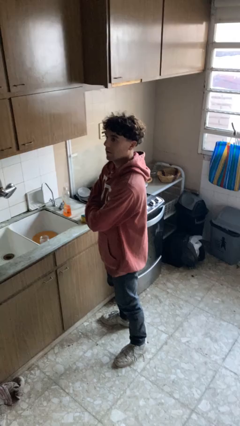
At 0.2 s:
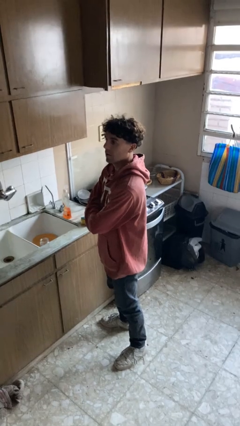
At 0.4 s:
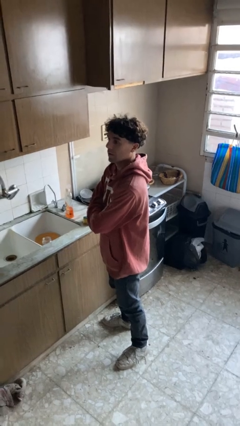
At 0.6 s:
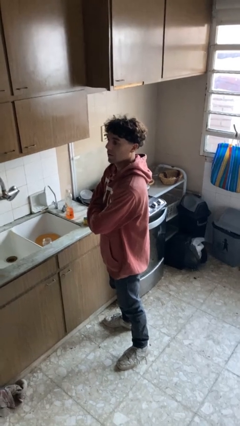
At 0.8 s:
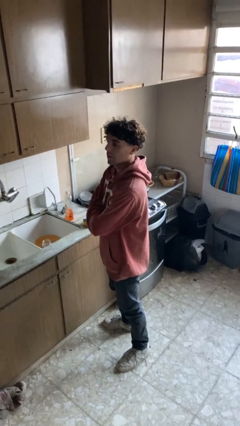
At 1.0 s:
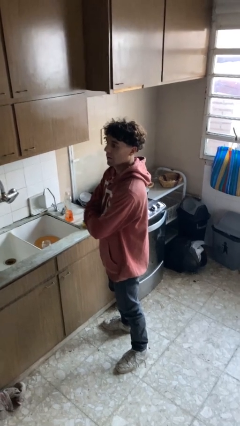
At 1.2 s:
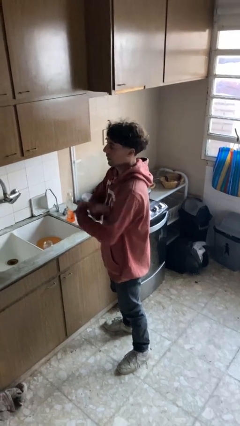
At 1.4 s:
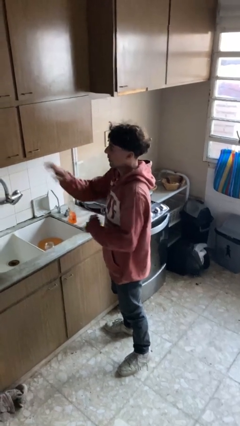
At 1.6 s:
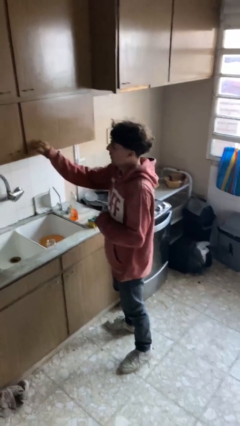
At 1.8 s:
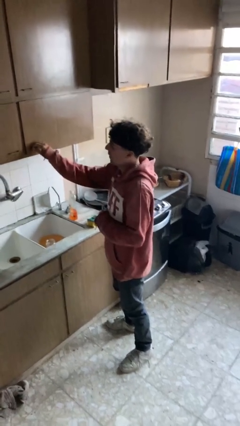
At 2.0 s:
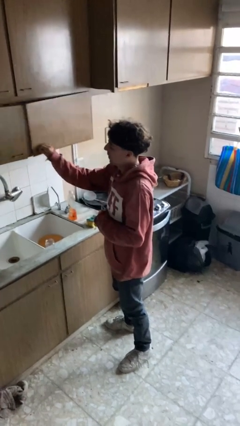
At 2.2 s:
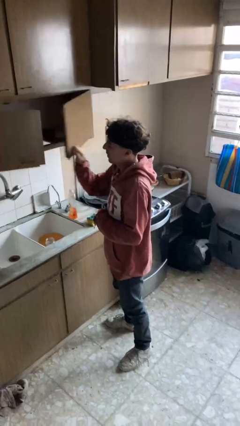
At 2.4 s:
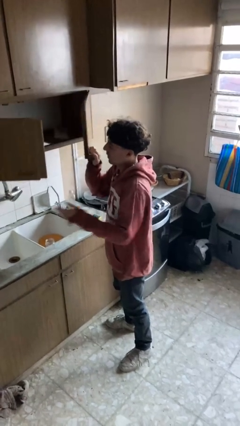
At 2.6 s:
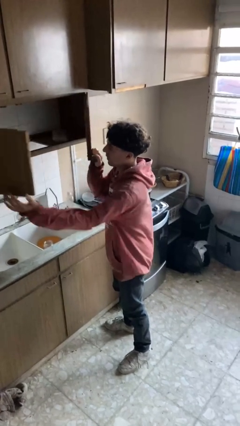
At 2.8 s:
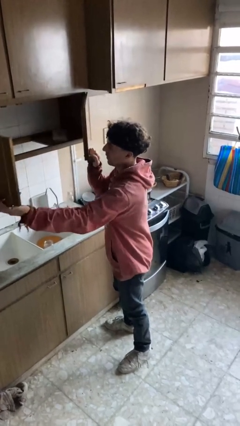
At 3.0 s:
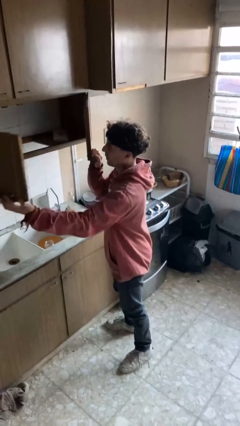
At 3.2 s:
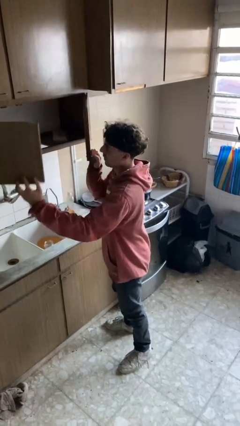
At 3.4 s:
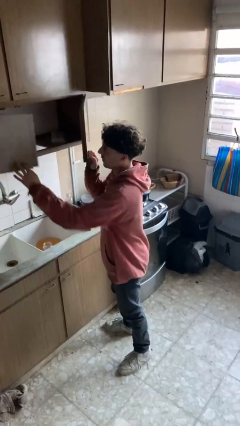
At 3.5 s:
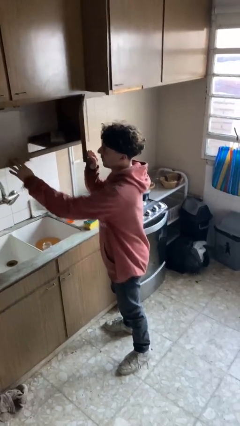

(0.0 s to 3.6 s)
person opens cabinet

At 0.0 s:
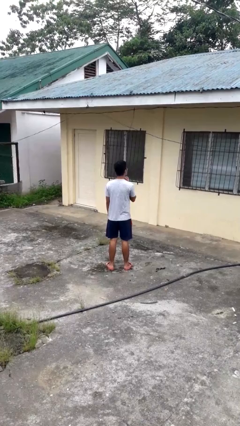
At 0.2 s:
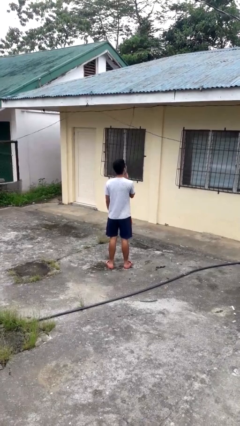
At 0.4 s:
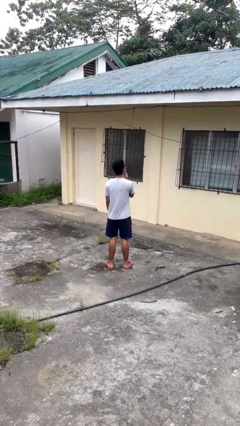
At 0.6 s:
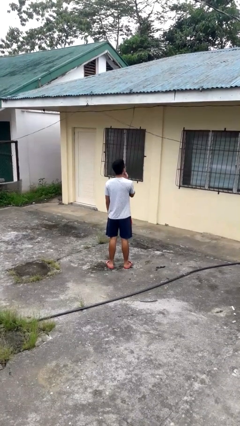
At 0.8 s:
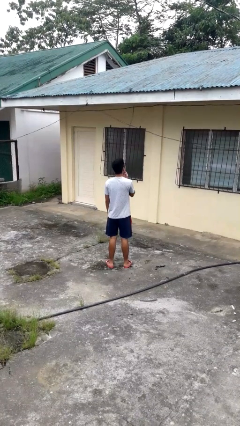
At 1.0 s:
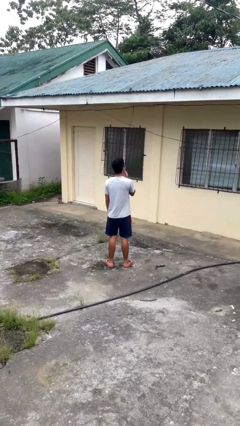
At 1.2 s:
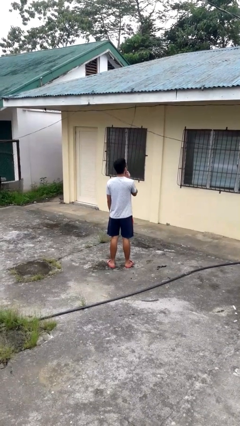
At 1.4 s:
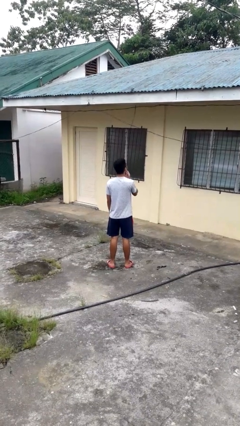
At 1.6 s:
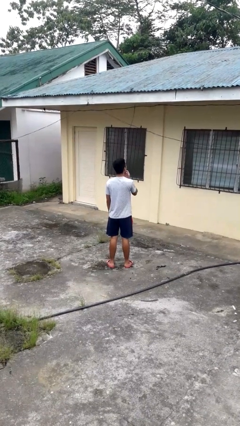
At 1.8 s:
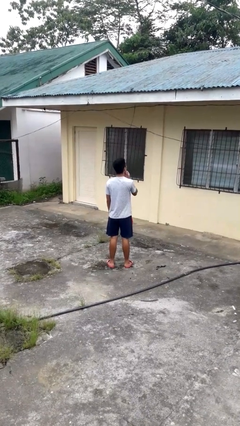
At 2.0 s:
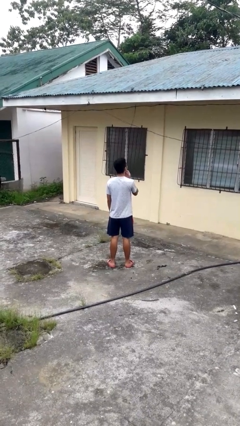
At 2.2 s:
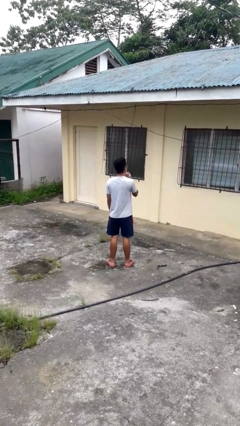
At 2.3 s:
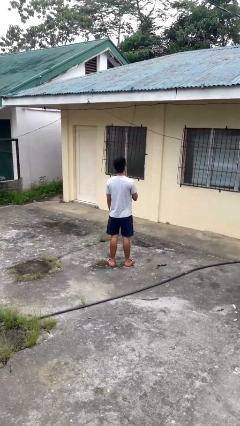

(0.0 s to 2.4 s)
person scratches face

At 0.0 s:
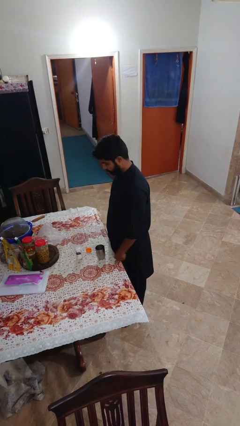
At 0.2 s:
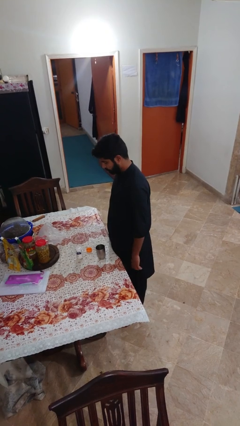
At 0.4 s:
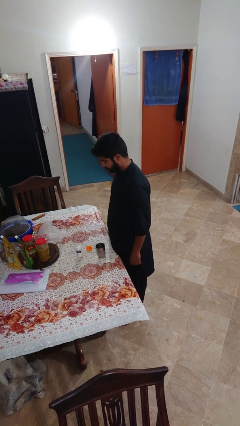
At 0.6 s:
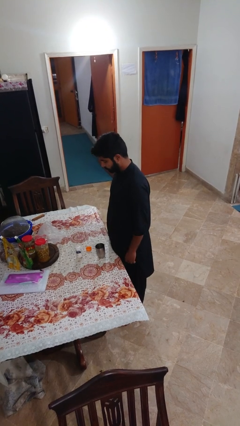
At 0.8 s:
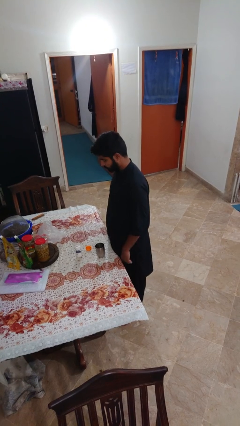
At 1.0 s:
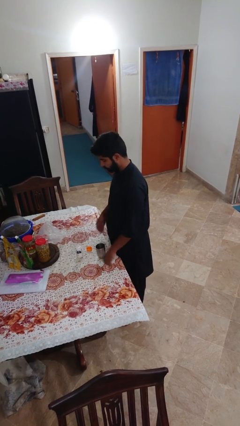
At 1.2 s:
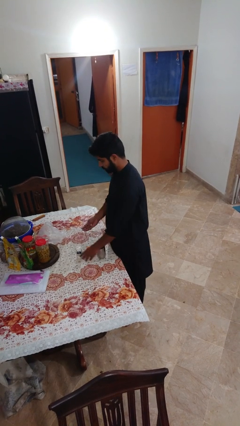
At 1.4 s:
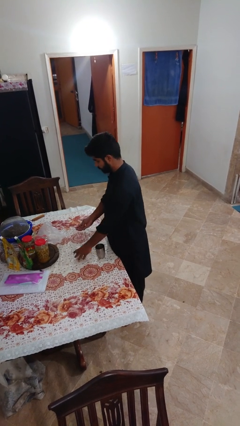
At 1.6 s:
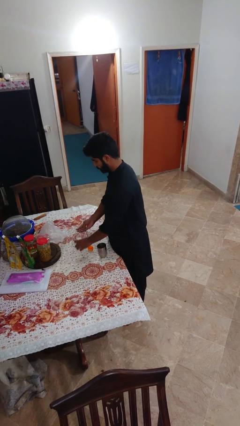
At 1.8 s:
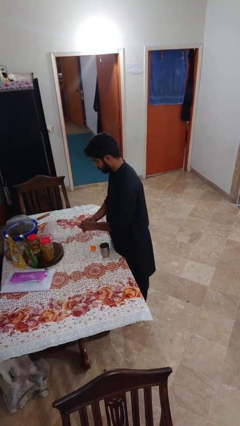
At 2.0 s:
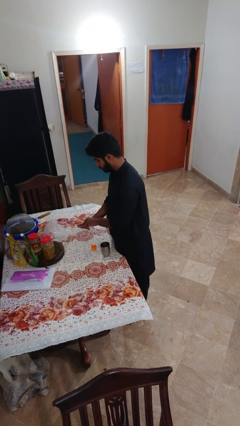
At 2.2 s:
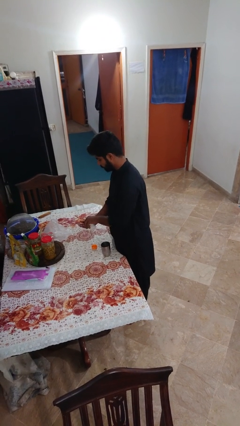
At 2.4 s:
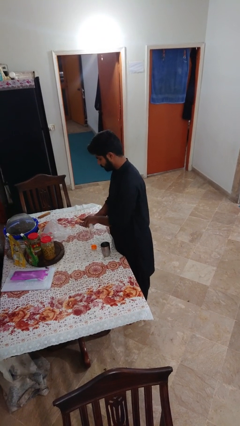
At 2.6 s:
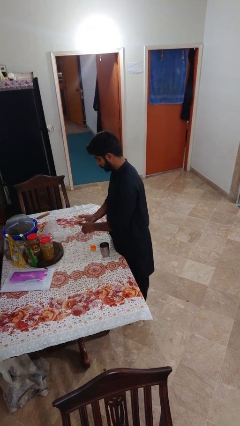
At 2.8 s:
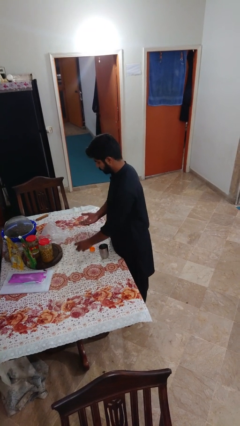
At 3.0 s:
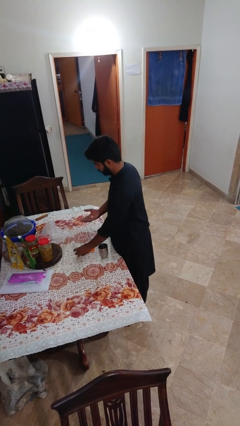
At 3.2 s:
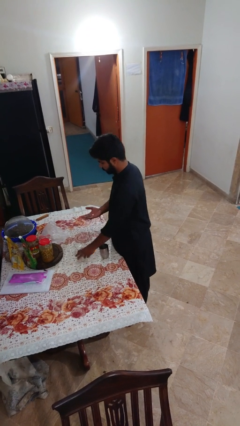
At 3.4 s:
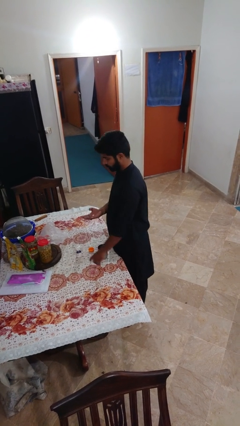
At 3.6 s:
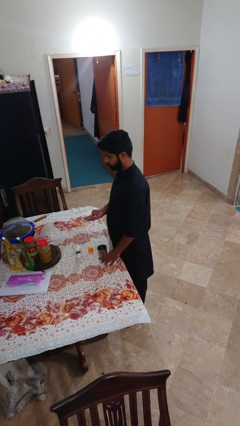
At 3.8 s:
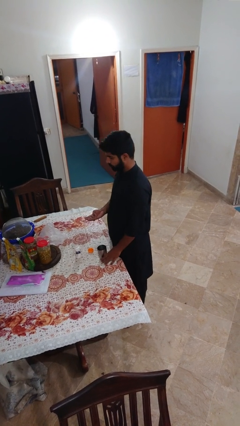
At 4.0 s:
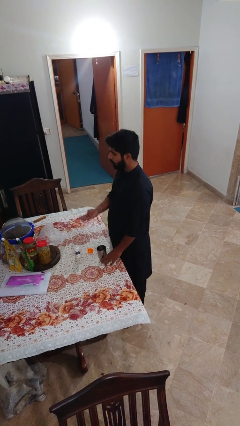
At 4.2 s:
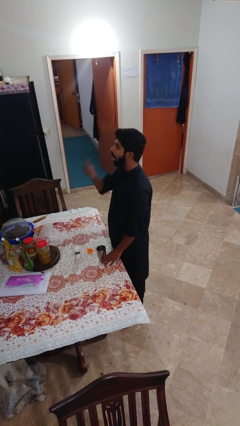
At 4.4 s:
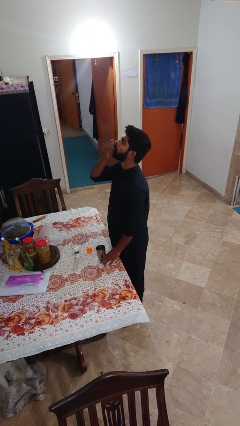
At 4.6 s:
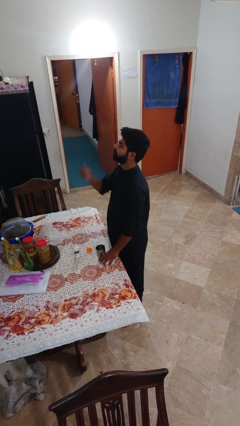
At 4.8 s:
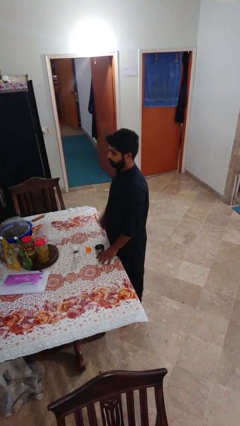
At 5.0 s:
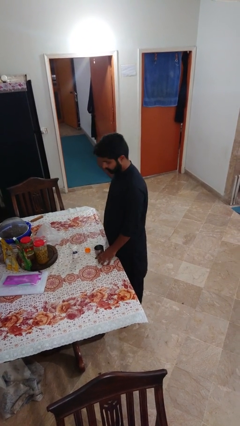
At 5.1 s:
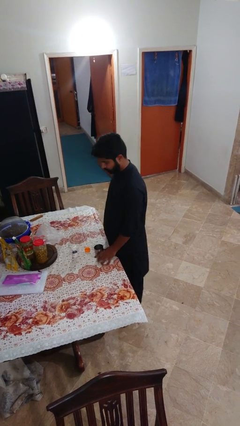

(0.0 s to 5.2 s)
person takes medicine pills

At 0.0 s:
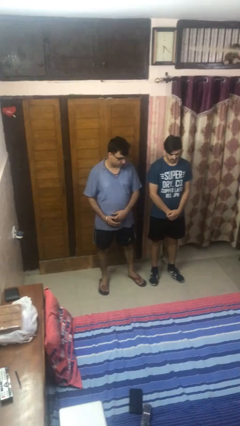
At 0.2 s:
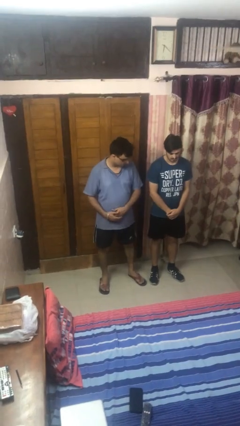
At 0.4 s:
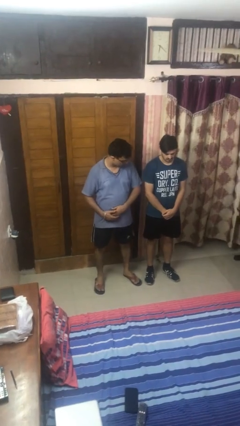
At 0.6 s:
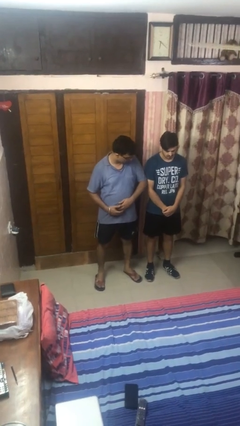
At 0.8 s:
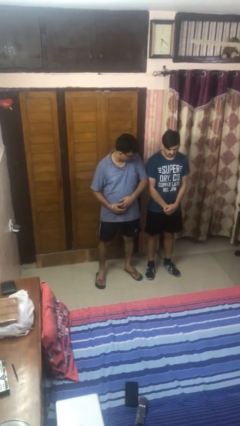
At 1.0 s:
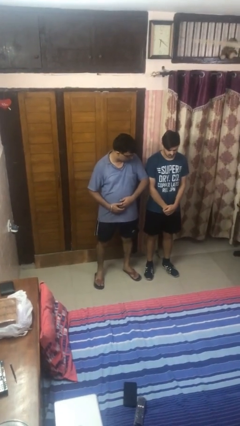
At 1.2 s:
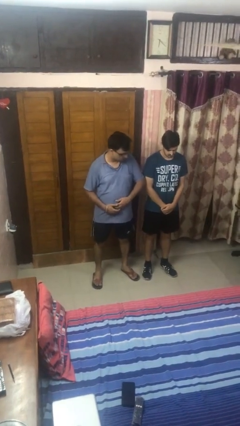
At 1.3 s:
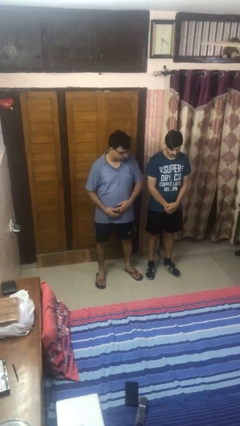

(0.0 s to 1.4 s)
person nudges person with elbow

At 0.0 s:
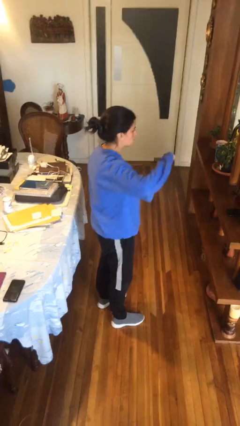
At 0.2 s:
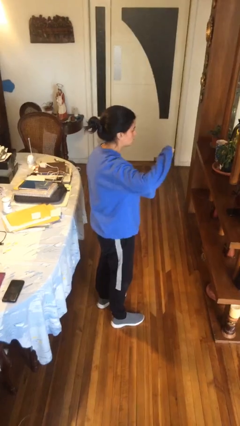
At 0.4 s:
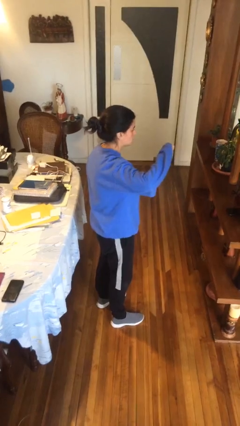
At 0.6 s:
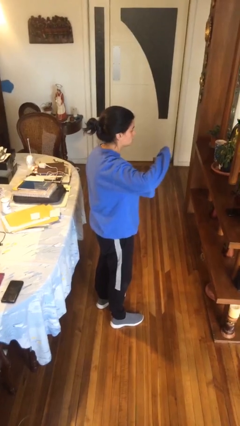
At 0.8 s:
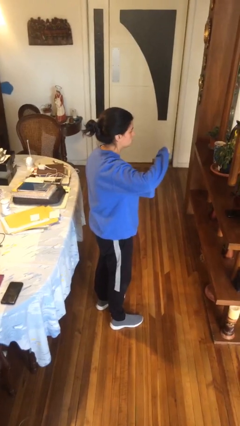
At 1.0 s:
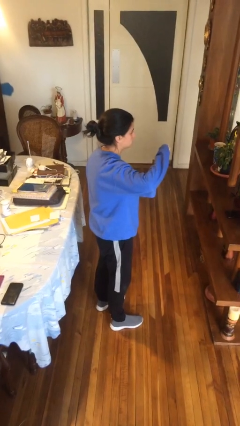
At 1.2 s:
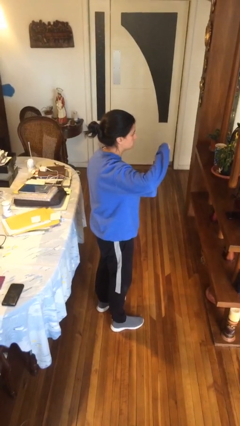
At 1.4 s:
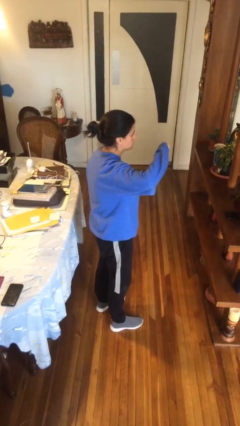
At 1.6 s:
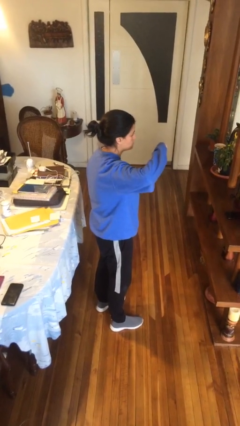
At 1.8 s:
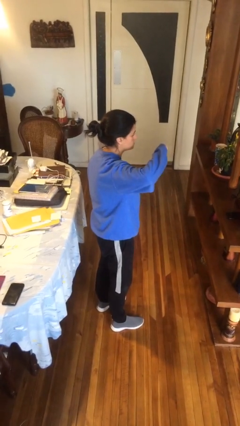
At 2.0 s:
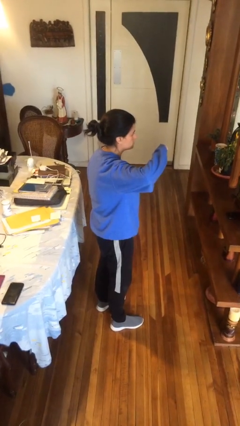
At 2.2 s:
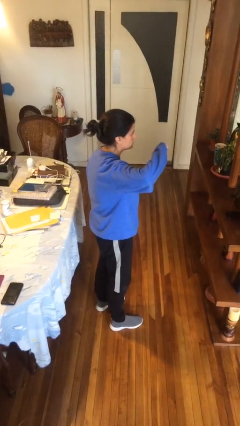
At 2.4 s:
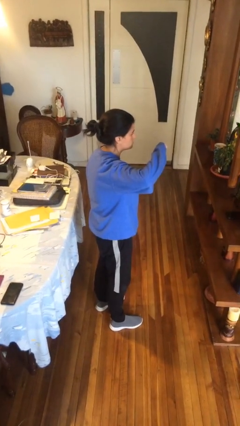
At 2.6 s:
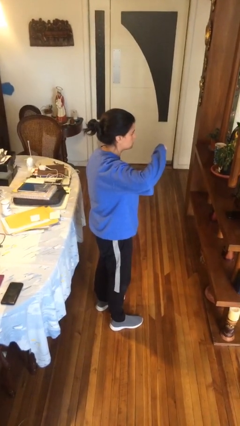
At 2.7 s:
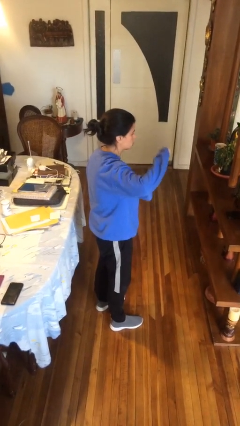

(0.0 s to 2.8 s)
person gestures thumbs down

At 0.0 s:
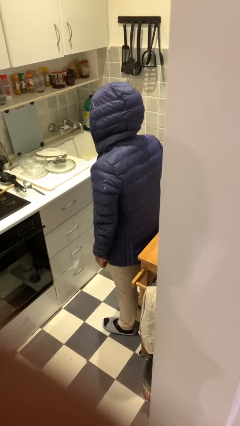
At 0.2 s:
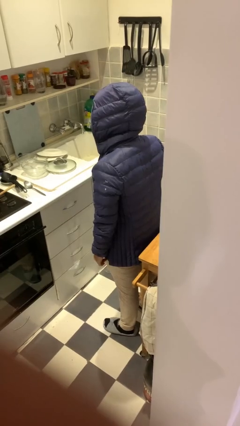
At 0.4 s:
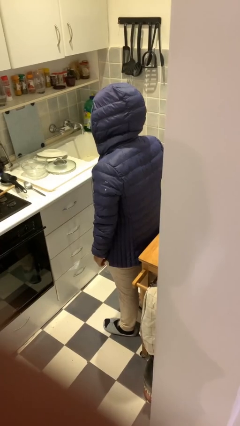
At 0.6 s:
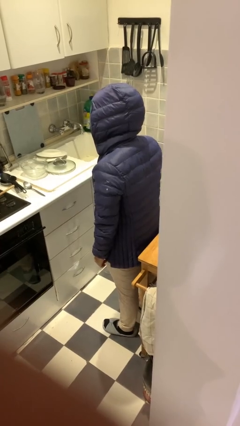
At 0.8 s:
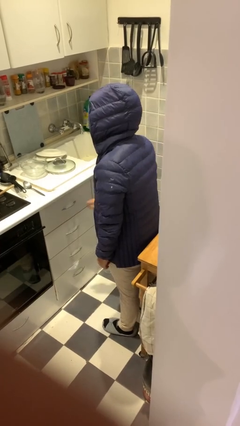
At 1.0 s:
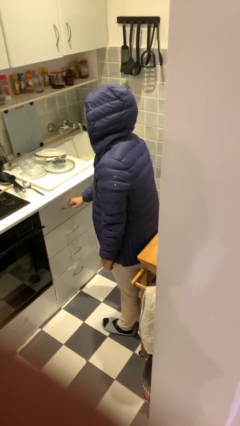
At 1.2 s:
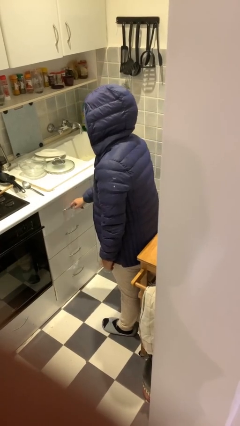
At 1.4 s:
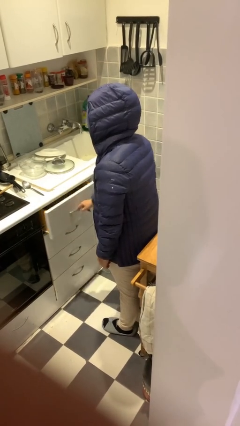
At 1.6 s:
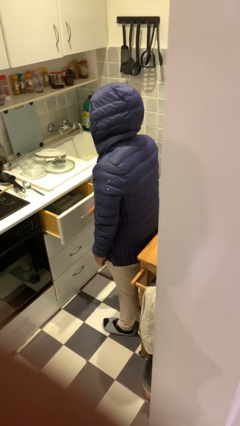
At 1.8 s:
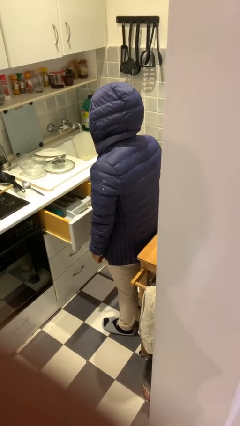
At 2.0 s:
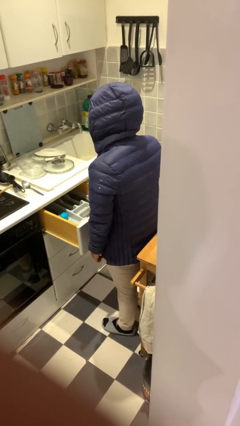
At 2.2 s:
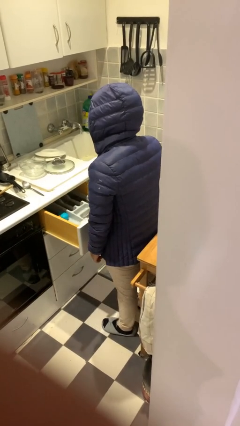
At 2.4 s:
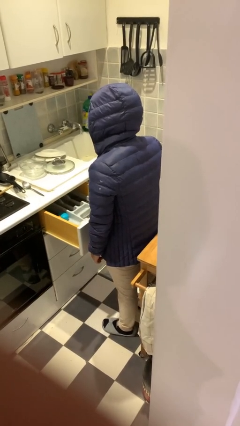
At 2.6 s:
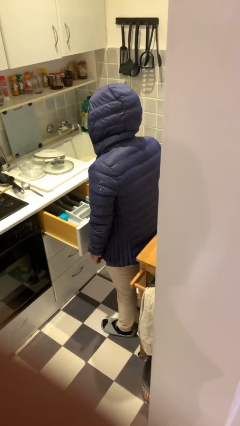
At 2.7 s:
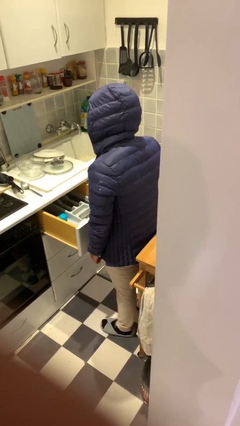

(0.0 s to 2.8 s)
person opens kitchen drawer
